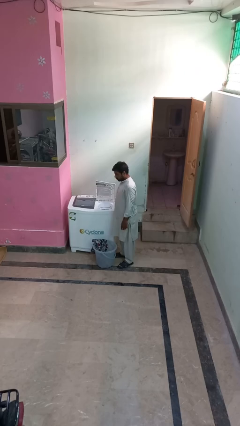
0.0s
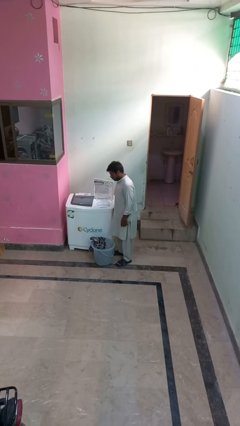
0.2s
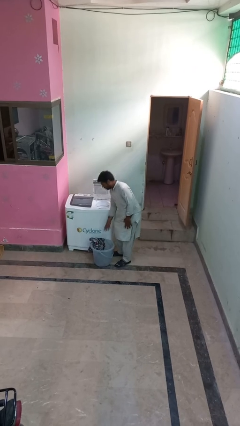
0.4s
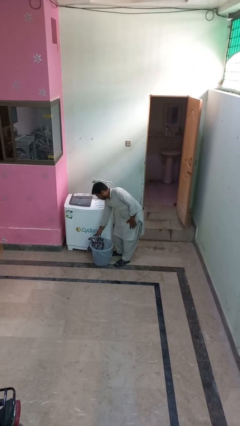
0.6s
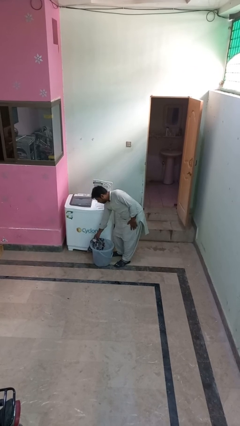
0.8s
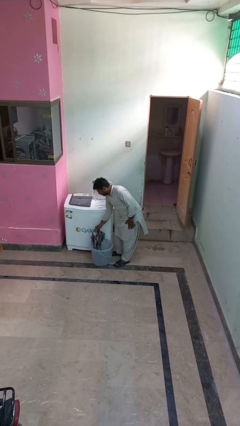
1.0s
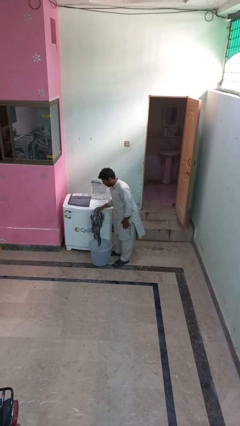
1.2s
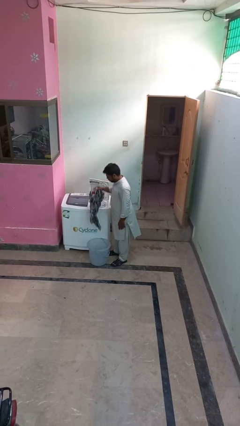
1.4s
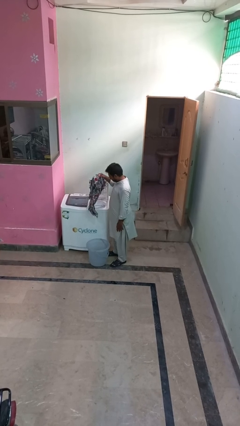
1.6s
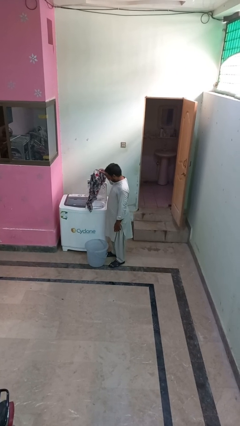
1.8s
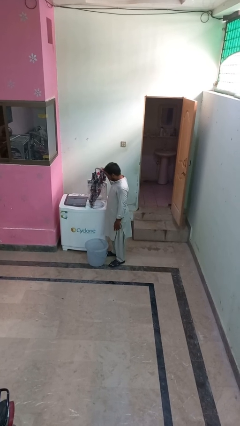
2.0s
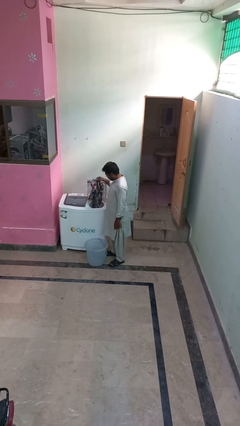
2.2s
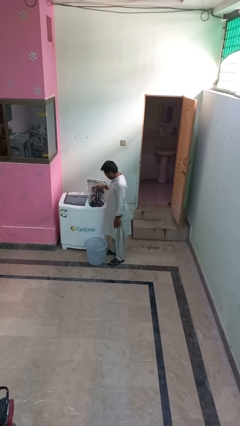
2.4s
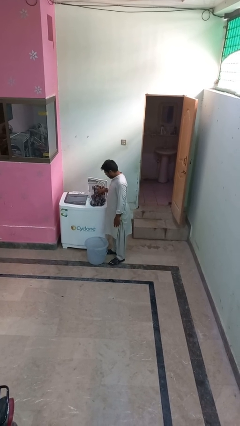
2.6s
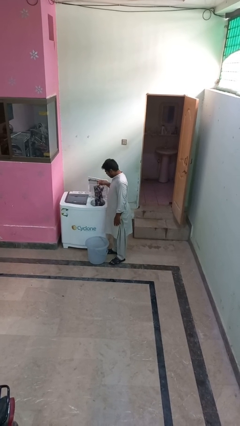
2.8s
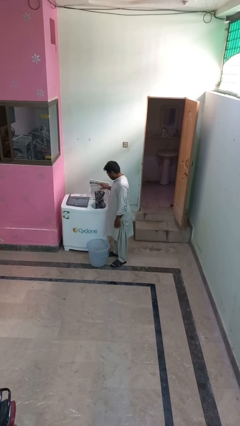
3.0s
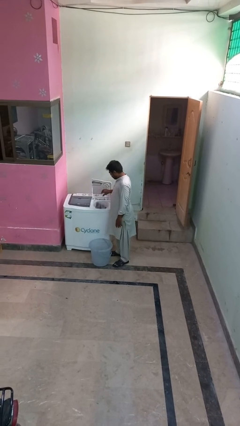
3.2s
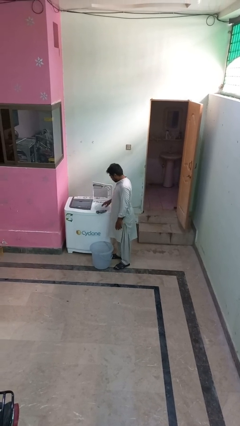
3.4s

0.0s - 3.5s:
person loads dryer

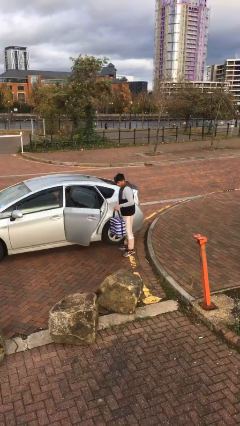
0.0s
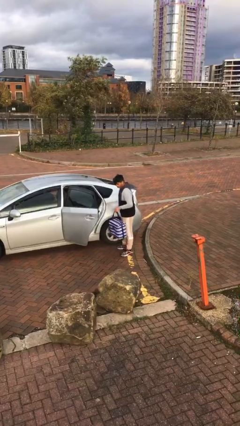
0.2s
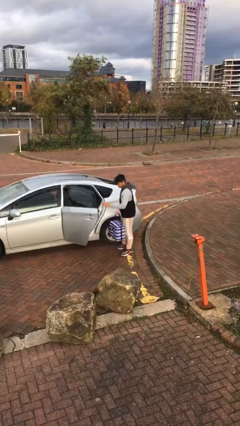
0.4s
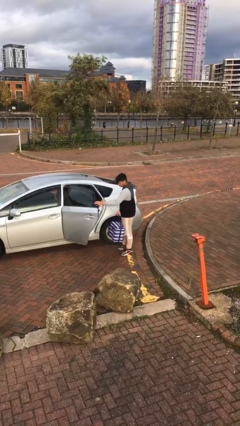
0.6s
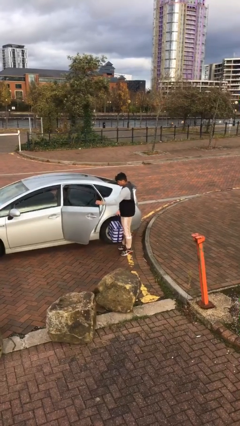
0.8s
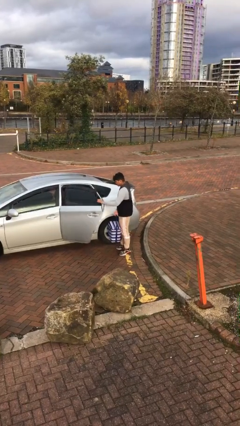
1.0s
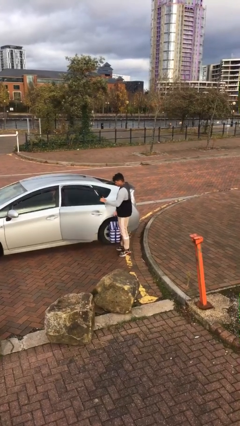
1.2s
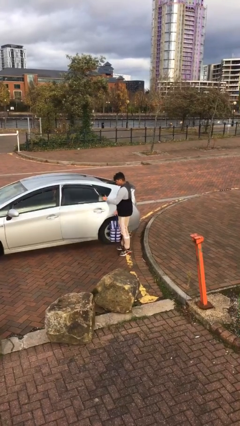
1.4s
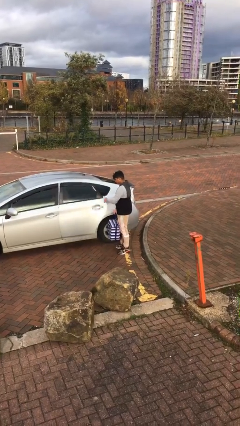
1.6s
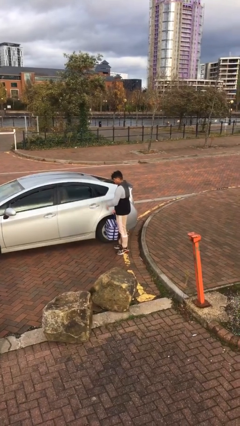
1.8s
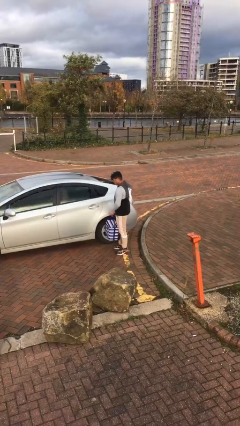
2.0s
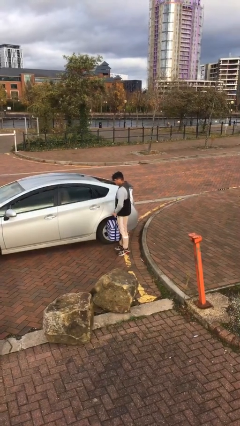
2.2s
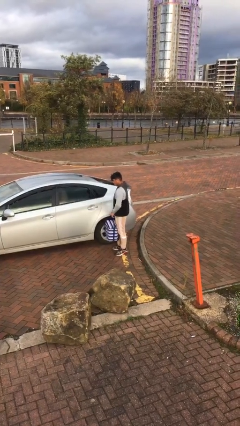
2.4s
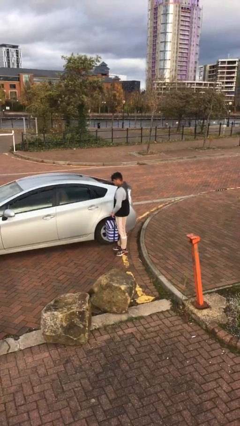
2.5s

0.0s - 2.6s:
person closes car door

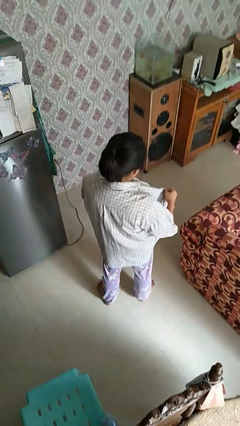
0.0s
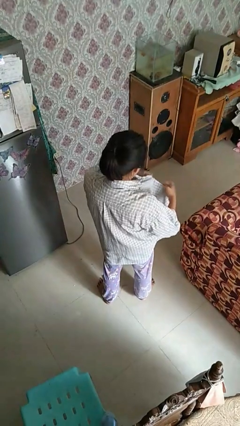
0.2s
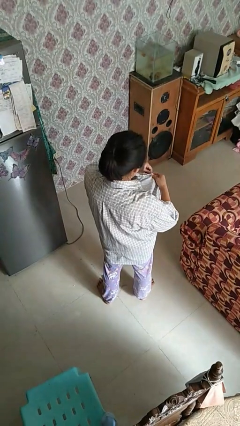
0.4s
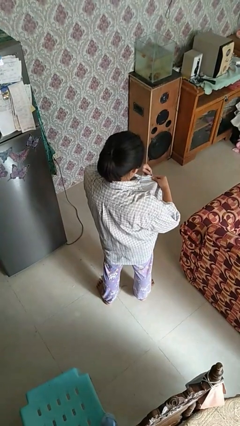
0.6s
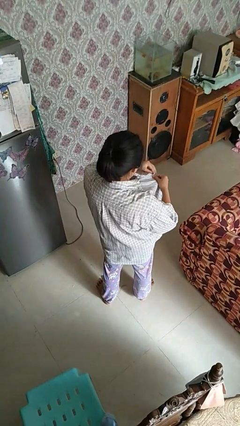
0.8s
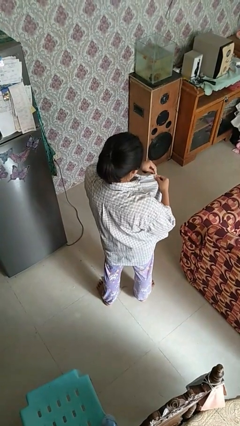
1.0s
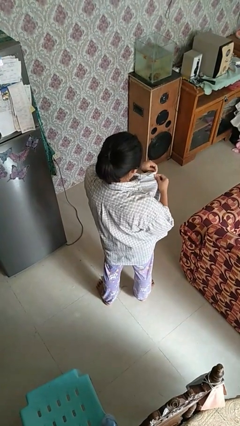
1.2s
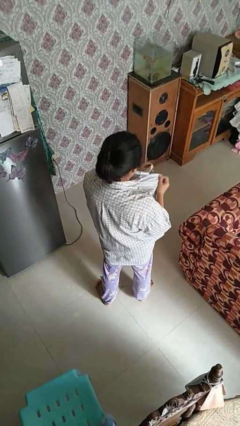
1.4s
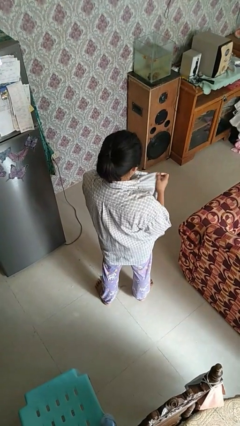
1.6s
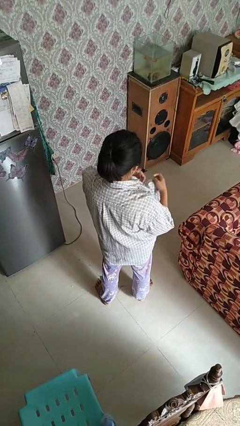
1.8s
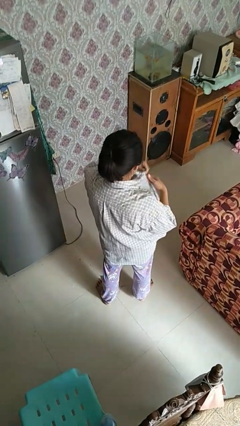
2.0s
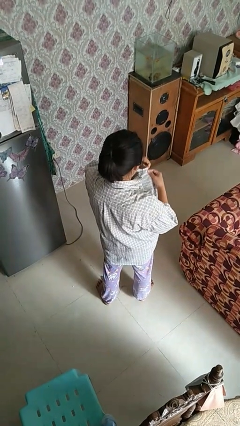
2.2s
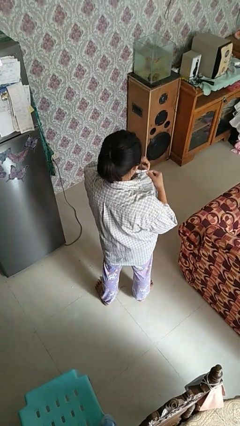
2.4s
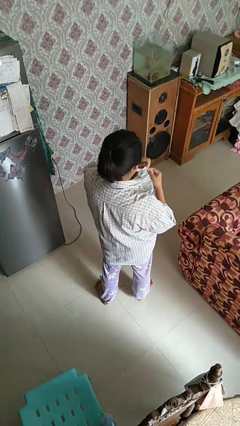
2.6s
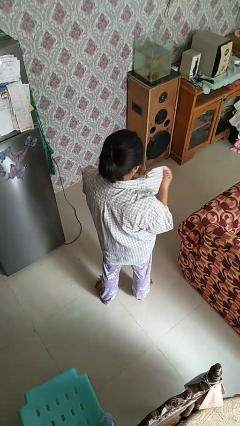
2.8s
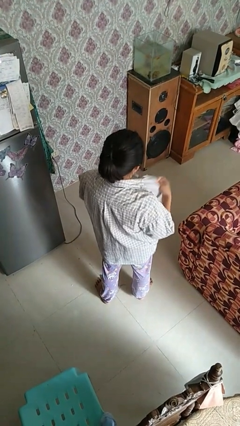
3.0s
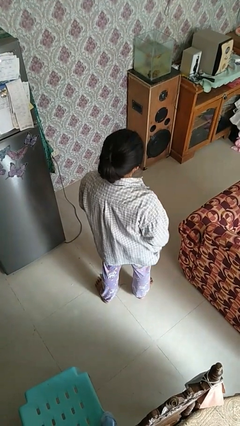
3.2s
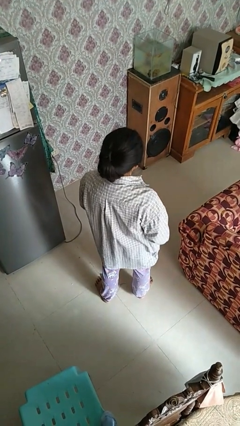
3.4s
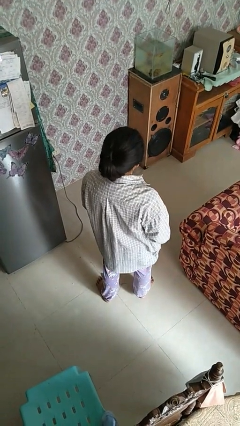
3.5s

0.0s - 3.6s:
person unbuttons shirt

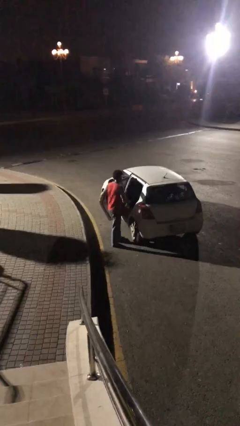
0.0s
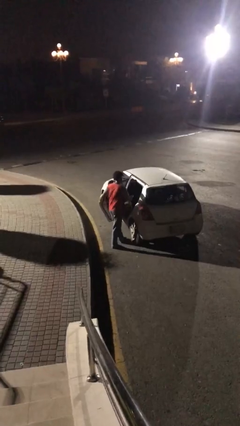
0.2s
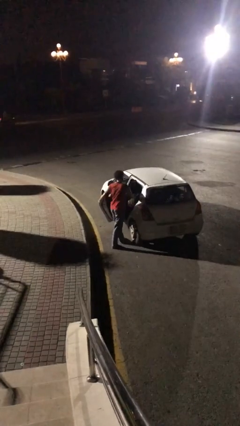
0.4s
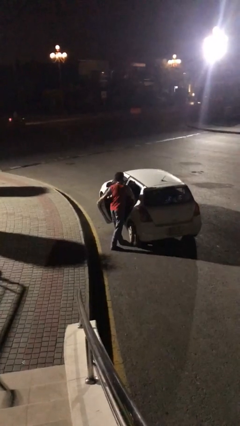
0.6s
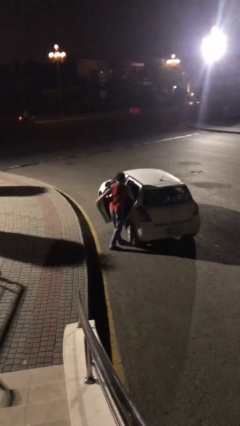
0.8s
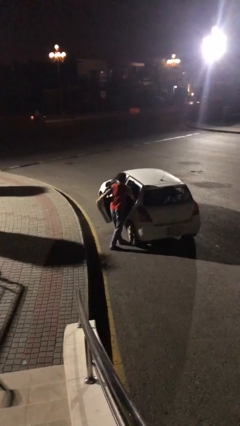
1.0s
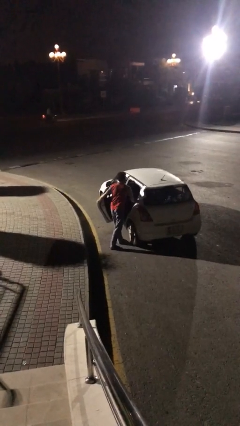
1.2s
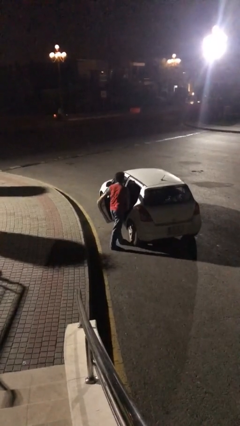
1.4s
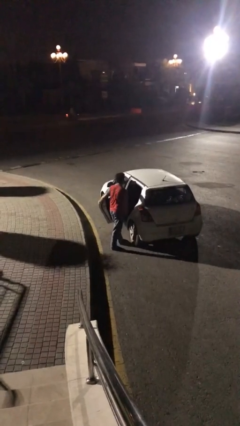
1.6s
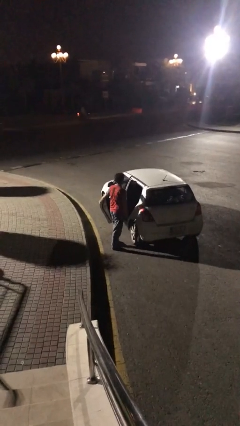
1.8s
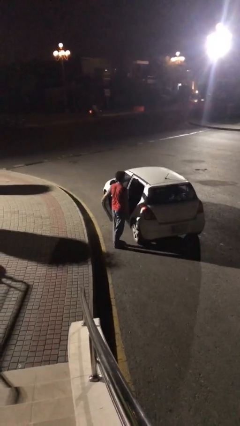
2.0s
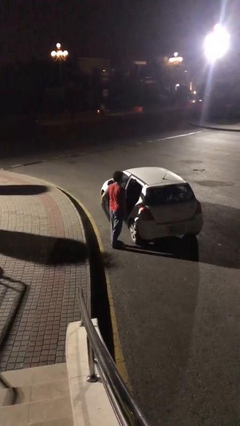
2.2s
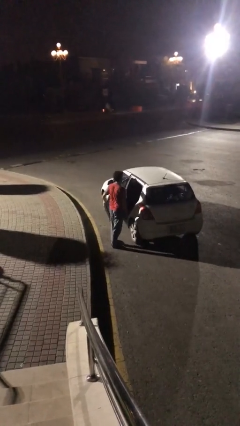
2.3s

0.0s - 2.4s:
person loads car

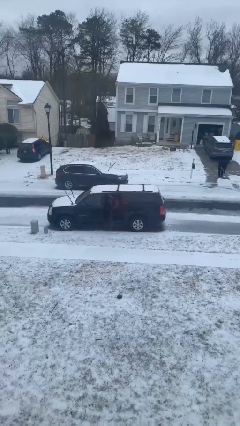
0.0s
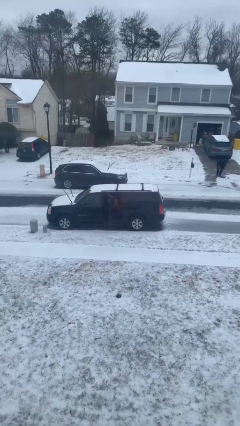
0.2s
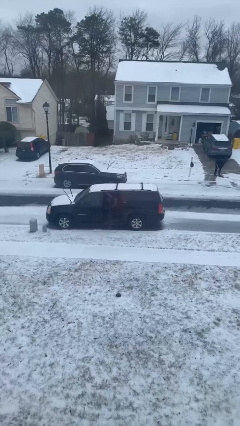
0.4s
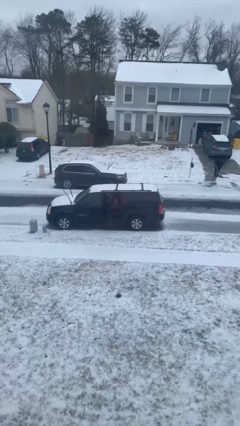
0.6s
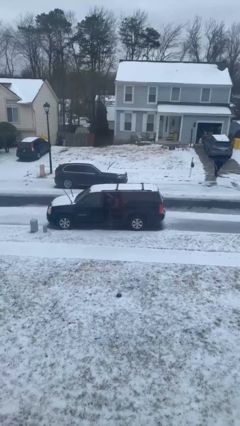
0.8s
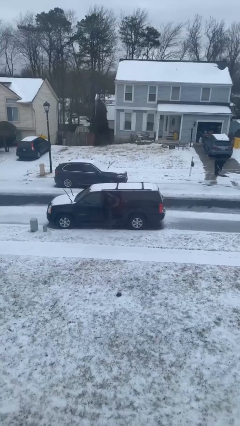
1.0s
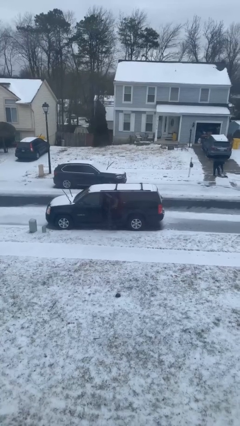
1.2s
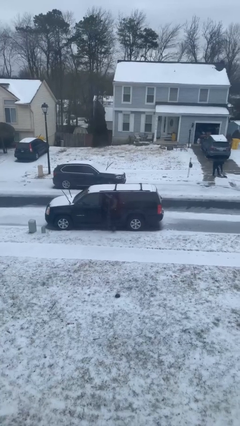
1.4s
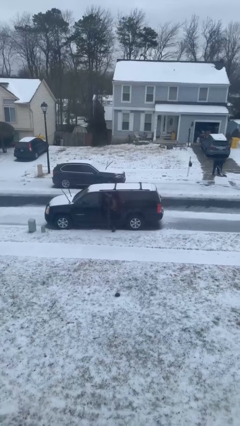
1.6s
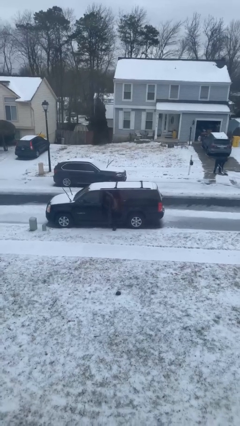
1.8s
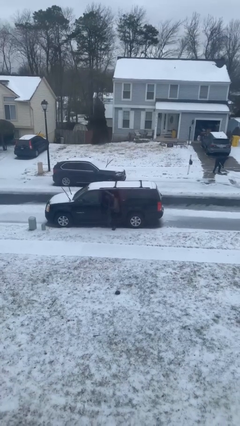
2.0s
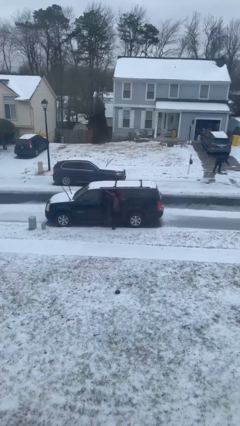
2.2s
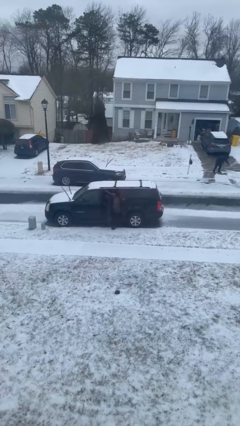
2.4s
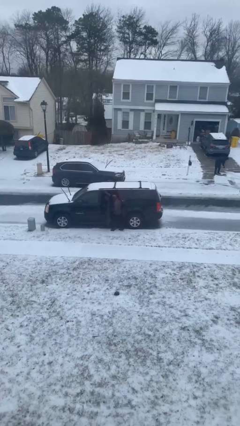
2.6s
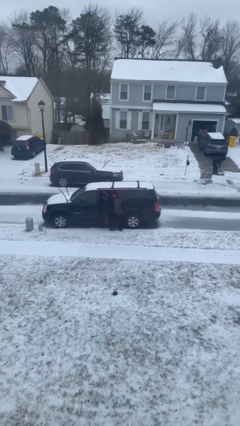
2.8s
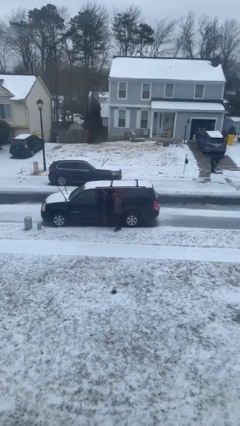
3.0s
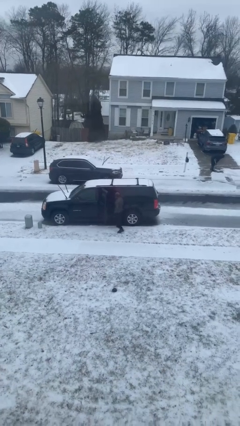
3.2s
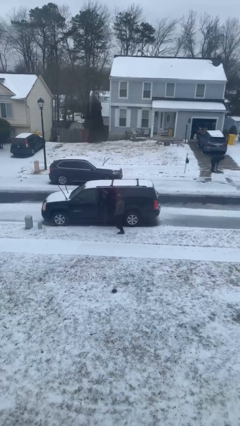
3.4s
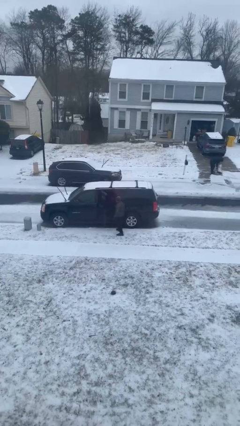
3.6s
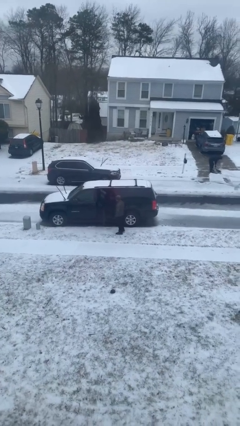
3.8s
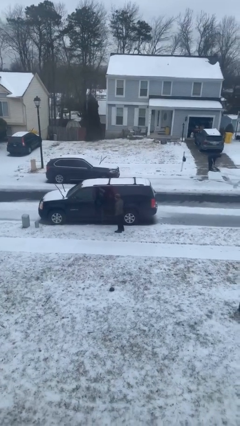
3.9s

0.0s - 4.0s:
person exits car

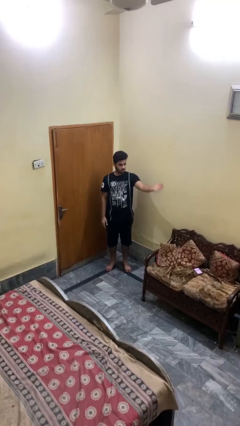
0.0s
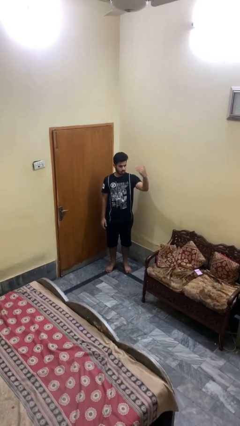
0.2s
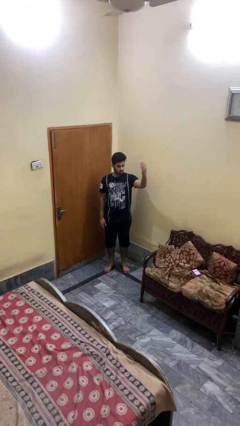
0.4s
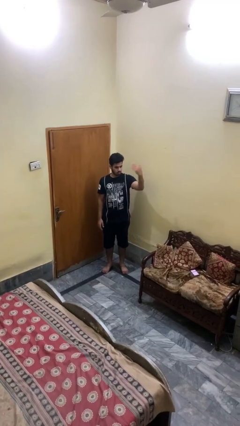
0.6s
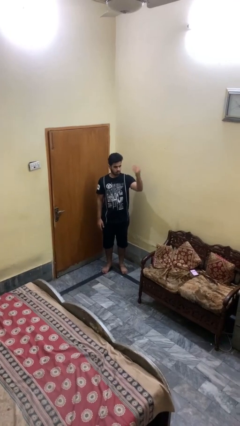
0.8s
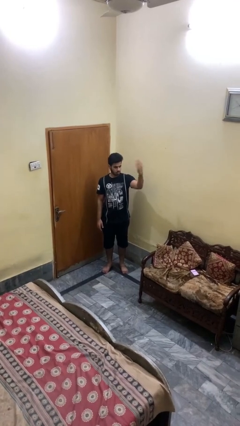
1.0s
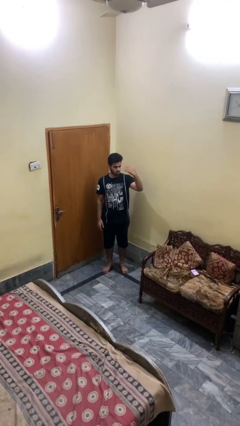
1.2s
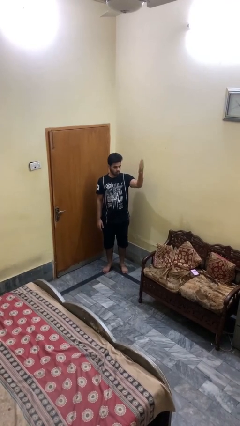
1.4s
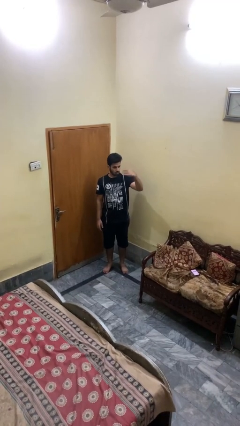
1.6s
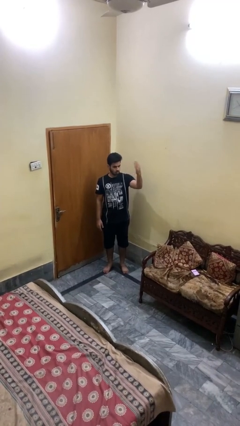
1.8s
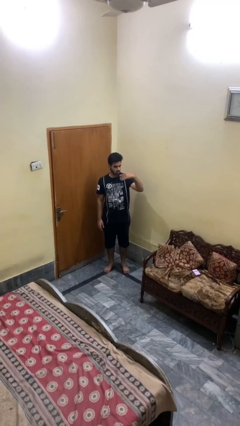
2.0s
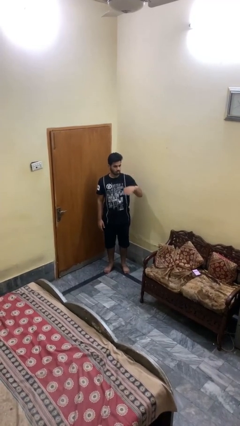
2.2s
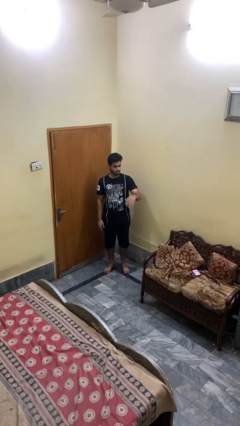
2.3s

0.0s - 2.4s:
person gestures come here
